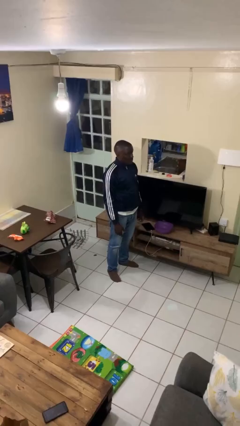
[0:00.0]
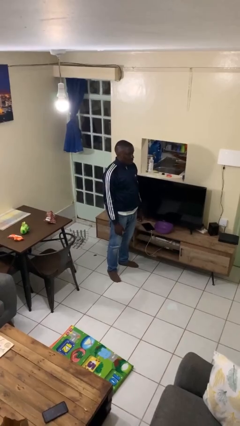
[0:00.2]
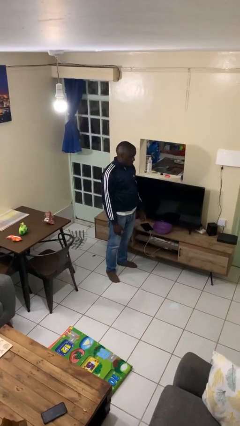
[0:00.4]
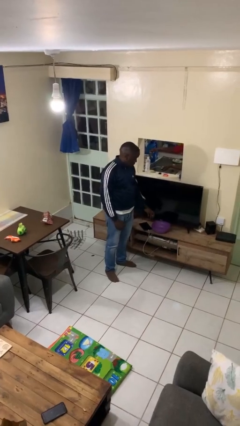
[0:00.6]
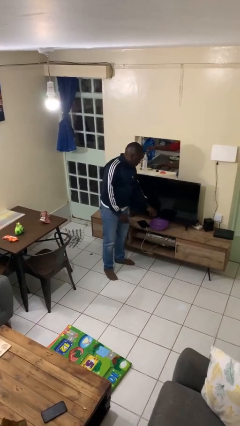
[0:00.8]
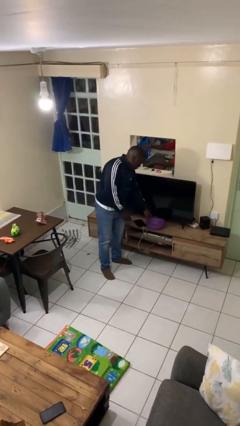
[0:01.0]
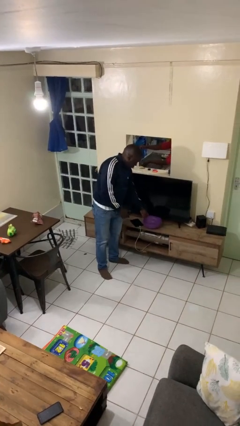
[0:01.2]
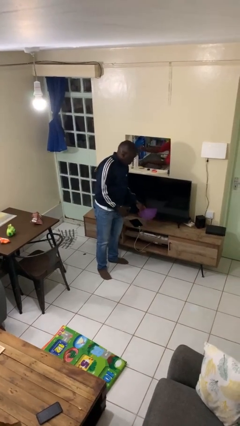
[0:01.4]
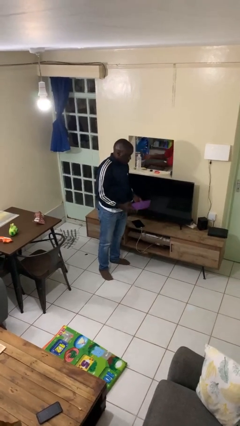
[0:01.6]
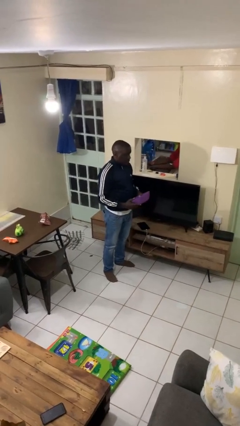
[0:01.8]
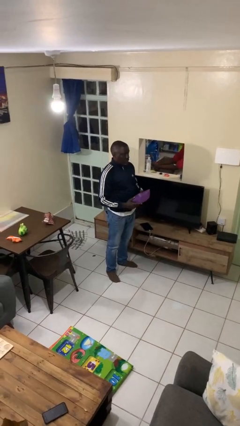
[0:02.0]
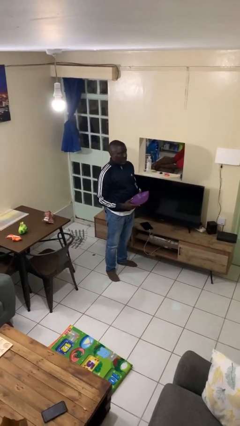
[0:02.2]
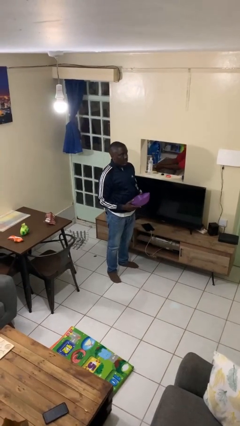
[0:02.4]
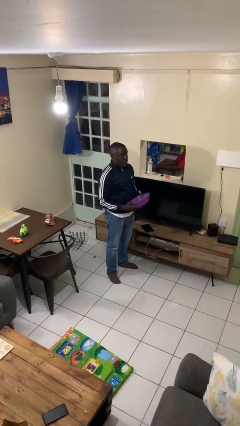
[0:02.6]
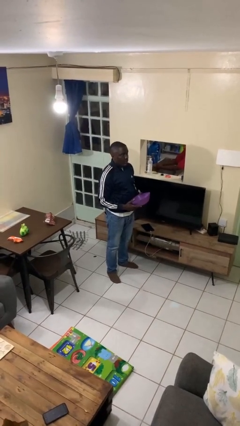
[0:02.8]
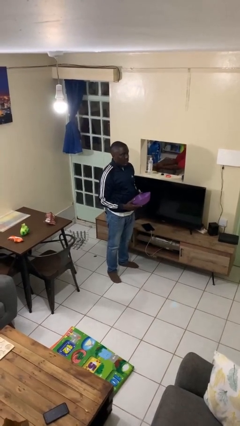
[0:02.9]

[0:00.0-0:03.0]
person picks up object from countertop

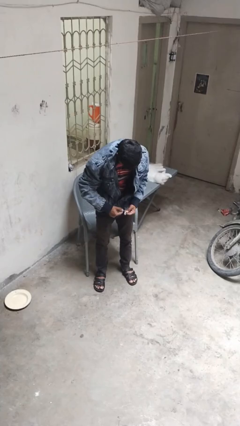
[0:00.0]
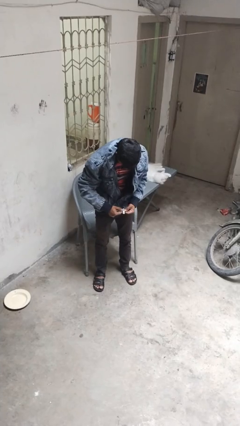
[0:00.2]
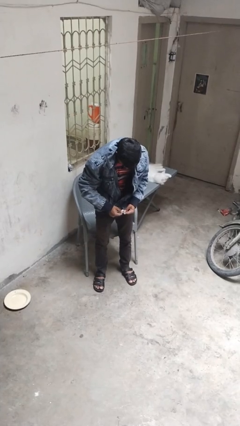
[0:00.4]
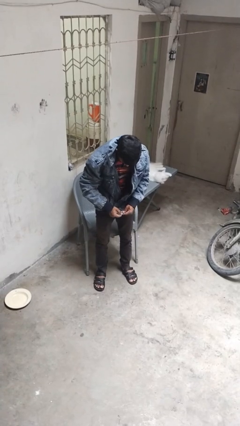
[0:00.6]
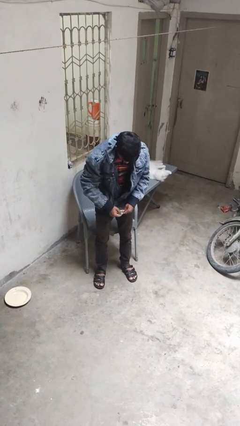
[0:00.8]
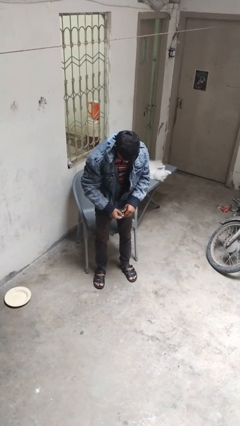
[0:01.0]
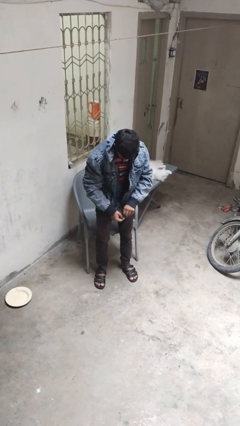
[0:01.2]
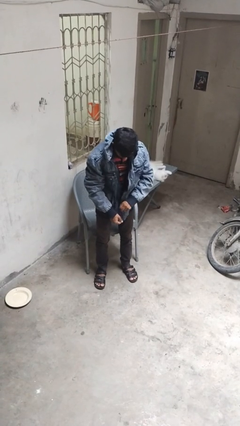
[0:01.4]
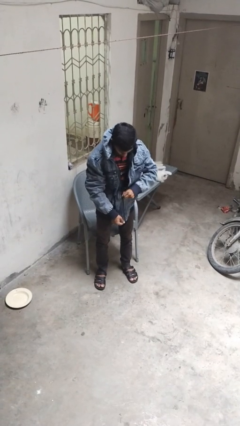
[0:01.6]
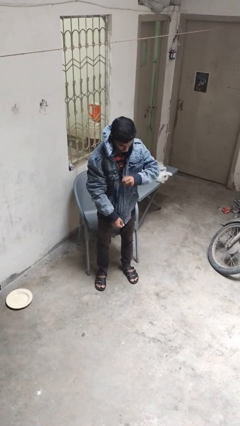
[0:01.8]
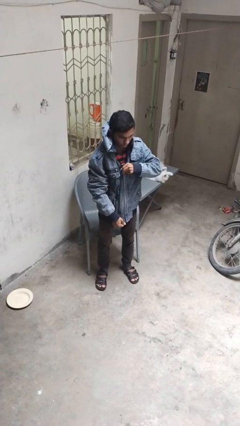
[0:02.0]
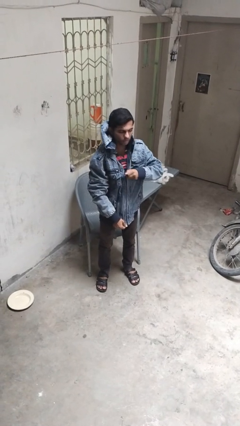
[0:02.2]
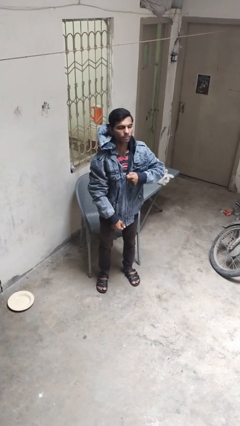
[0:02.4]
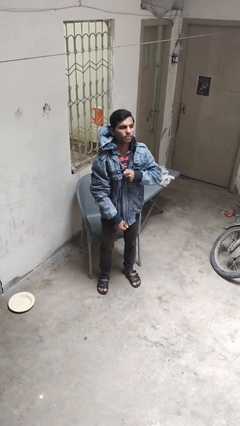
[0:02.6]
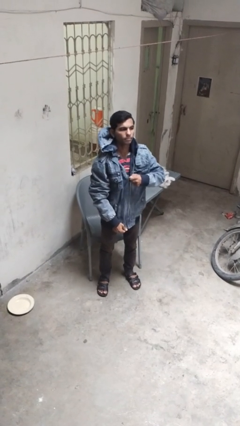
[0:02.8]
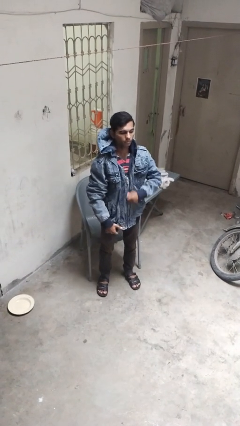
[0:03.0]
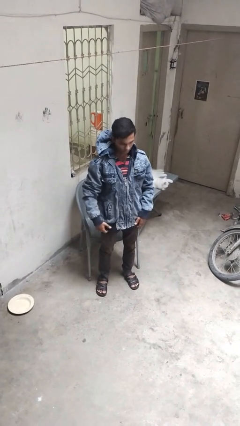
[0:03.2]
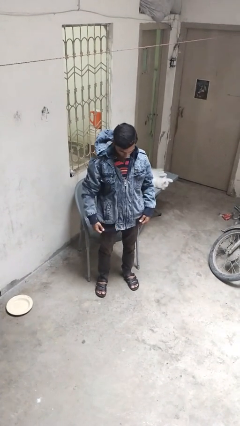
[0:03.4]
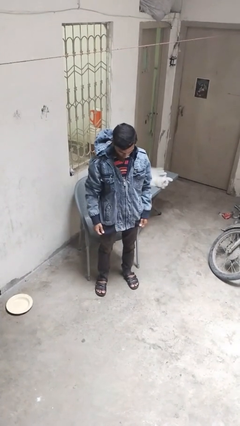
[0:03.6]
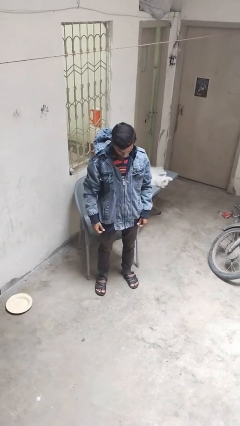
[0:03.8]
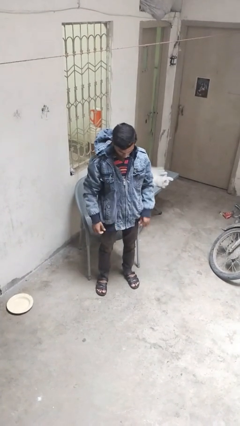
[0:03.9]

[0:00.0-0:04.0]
person zips up jacket

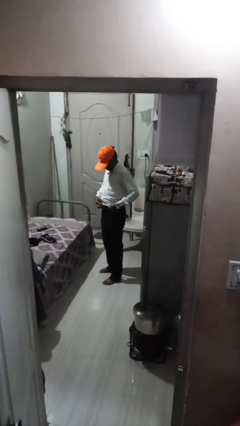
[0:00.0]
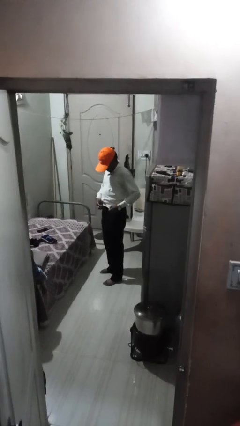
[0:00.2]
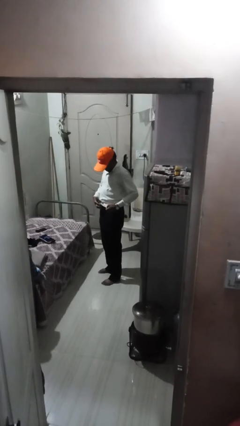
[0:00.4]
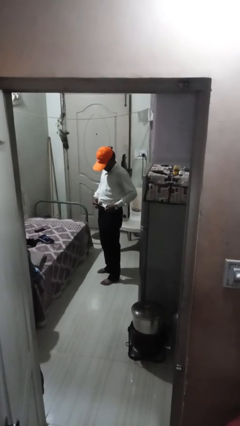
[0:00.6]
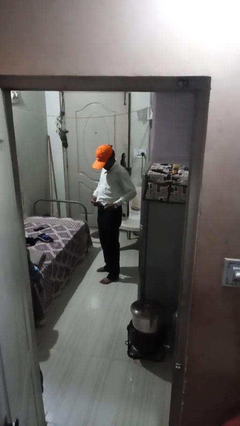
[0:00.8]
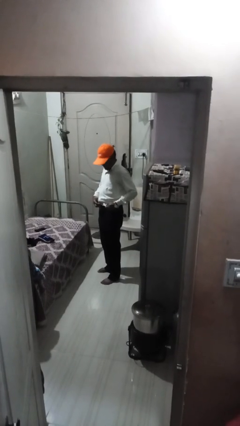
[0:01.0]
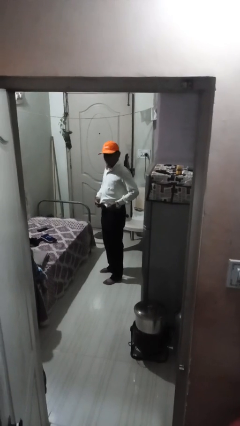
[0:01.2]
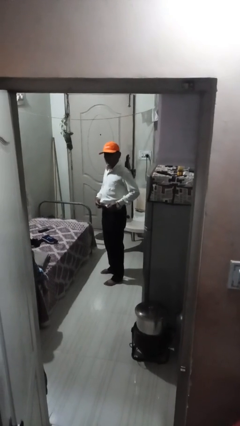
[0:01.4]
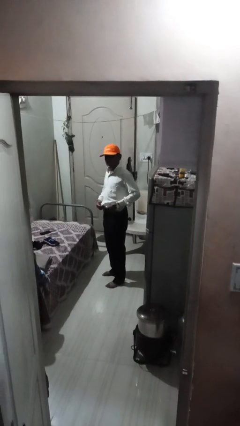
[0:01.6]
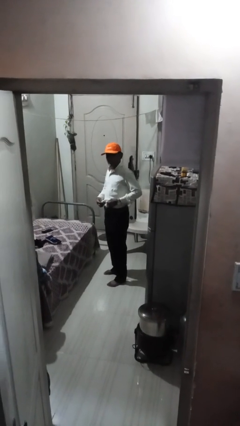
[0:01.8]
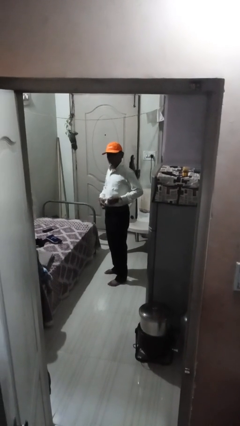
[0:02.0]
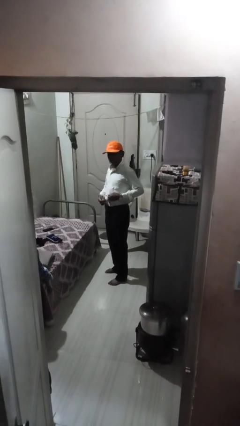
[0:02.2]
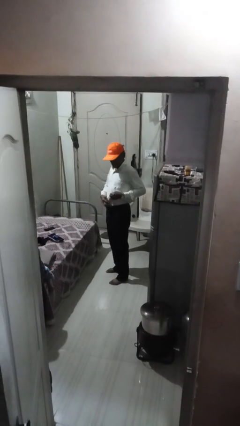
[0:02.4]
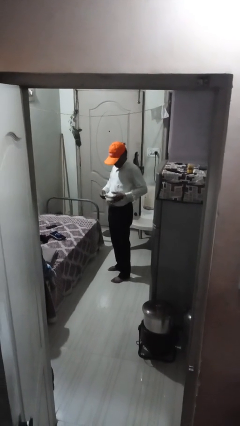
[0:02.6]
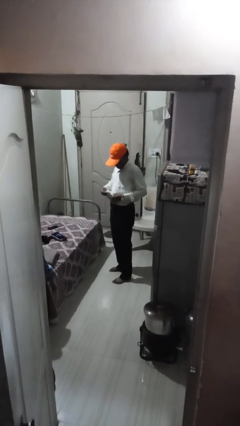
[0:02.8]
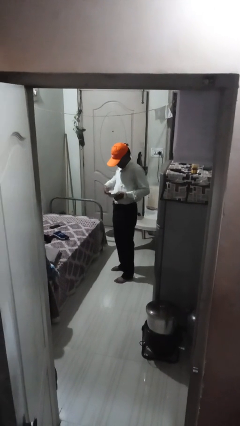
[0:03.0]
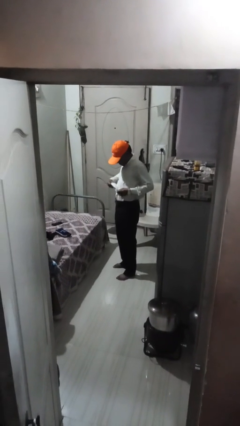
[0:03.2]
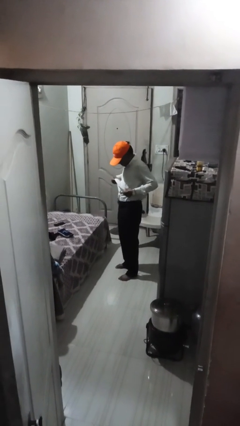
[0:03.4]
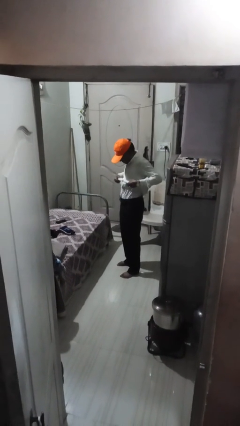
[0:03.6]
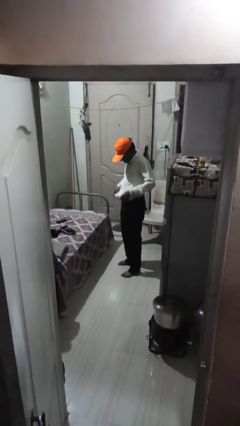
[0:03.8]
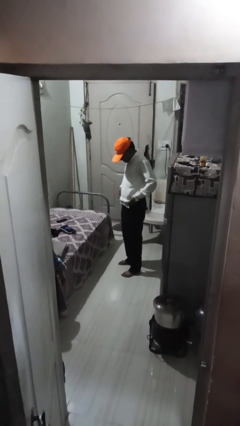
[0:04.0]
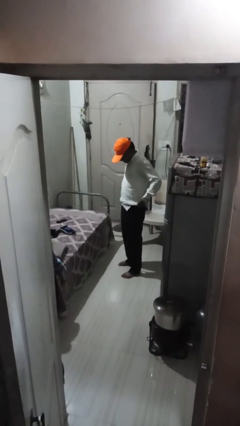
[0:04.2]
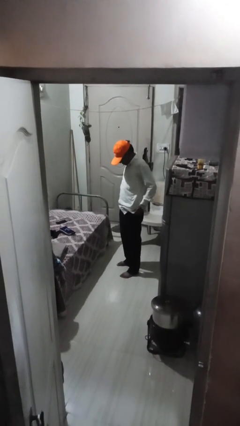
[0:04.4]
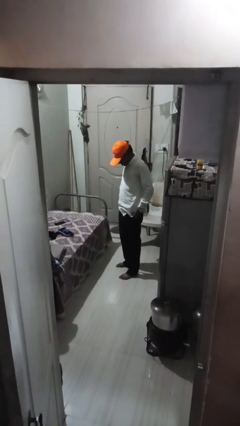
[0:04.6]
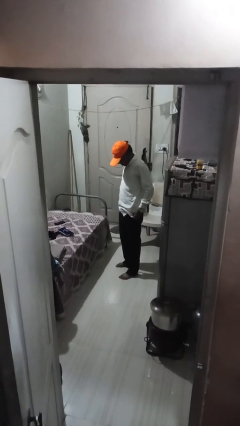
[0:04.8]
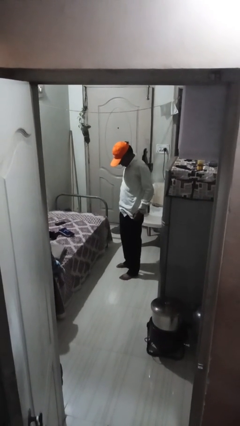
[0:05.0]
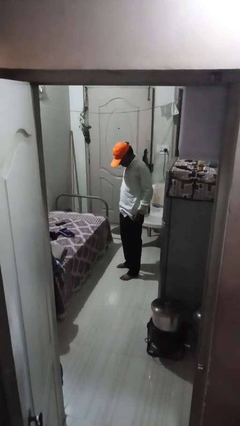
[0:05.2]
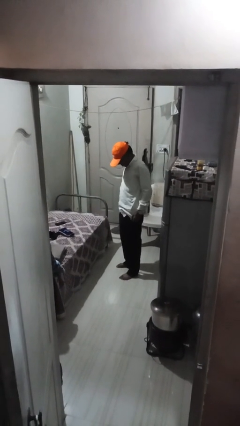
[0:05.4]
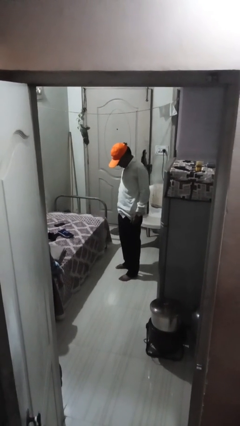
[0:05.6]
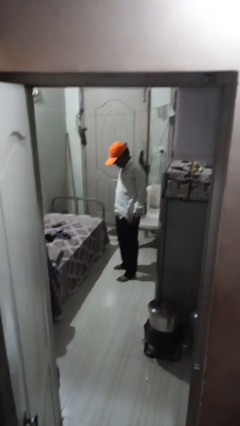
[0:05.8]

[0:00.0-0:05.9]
person untucks shirt

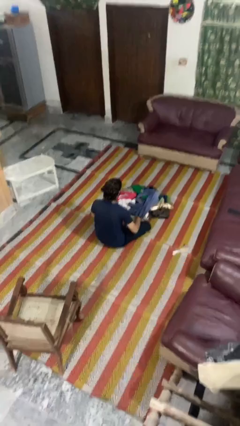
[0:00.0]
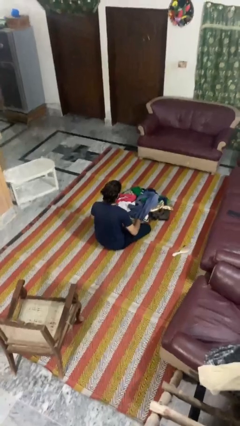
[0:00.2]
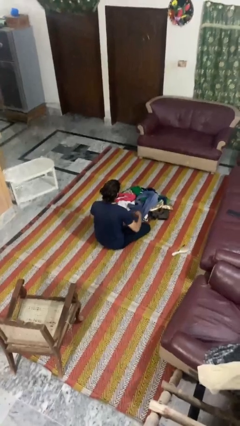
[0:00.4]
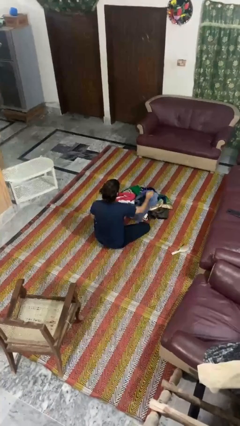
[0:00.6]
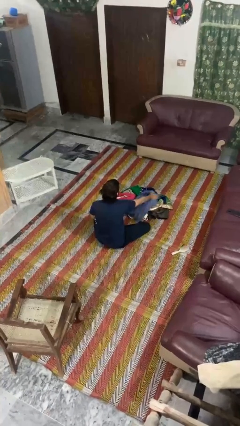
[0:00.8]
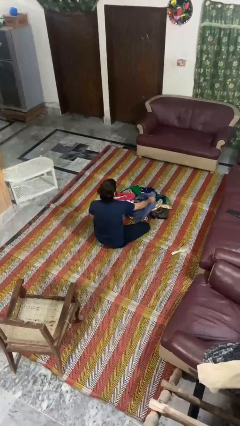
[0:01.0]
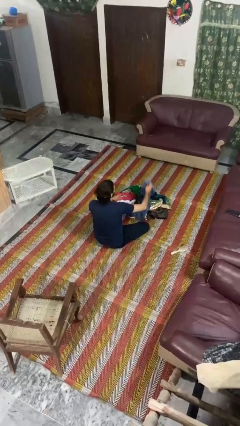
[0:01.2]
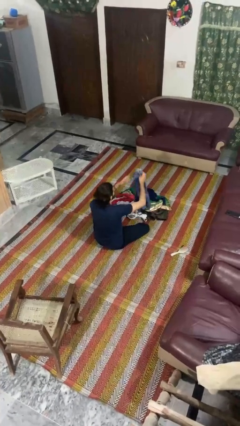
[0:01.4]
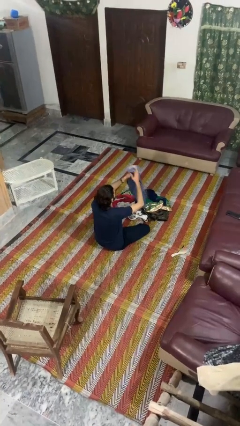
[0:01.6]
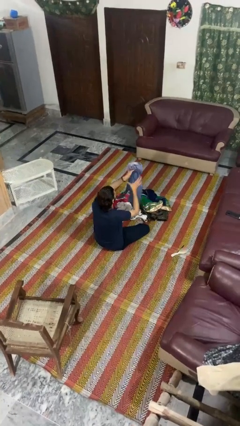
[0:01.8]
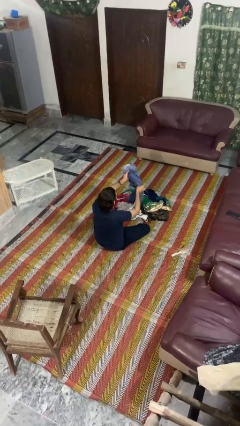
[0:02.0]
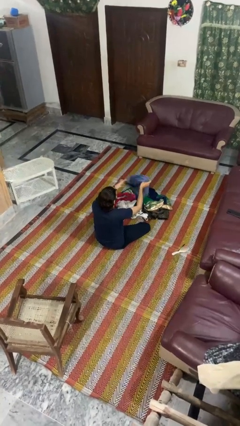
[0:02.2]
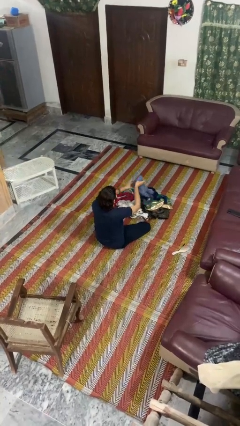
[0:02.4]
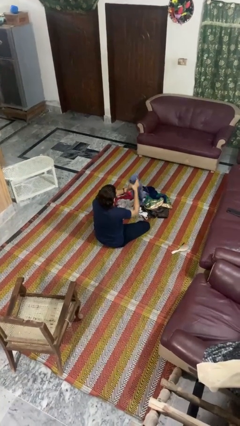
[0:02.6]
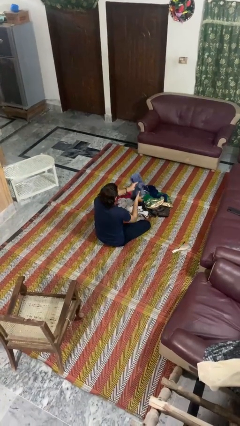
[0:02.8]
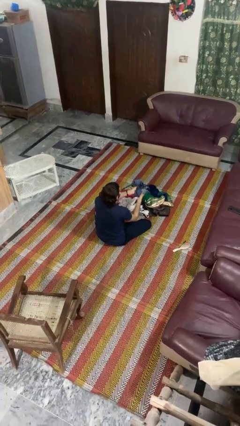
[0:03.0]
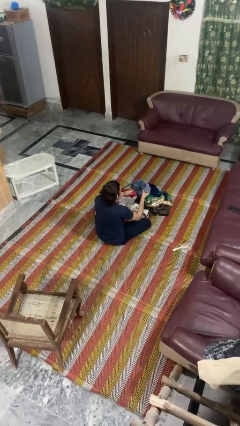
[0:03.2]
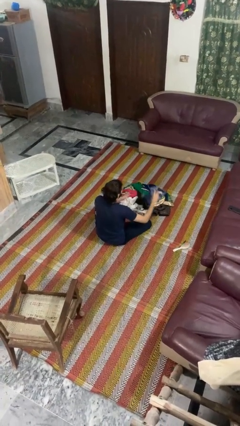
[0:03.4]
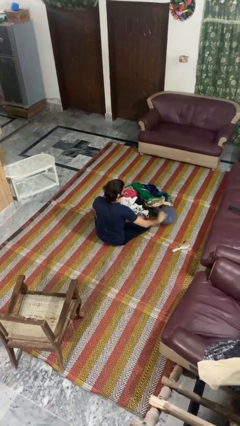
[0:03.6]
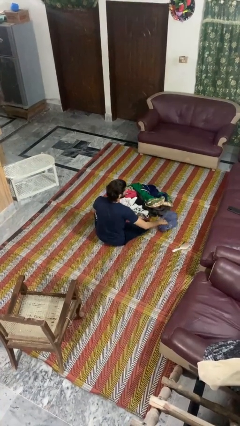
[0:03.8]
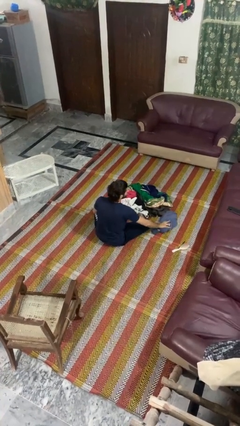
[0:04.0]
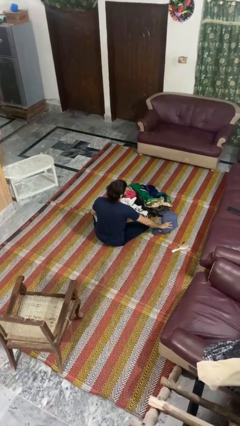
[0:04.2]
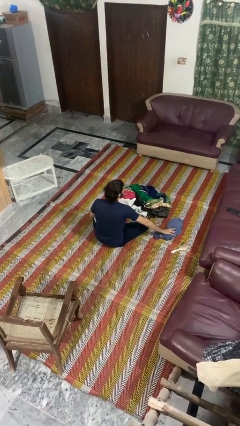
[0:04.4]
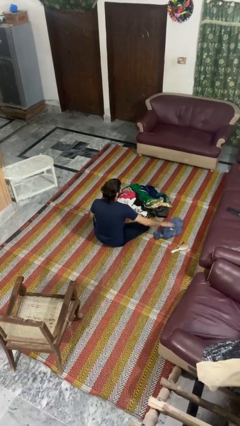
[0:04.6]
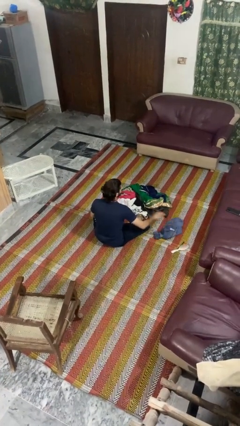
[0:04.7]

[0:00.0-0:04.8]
person folds pants
